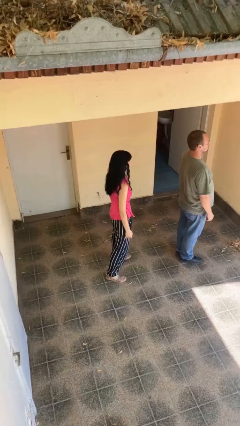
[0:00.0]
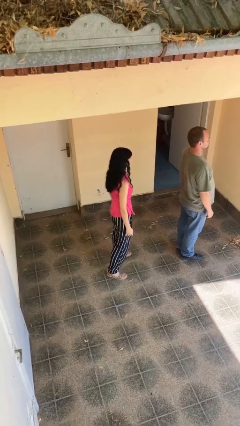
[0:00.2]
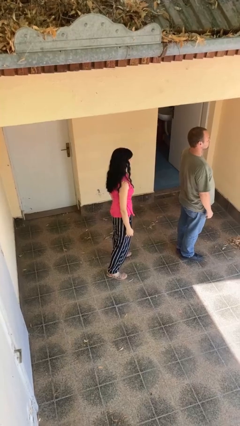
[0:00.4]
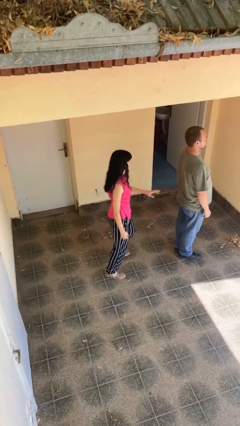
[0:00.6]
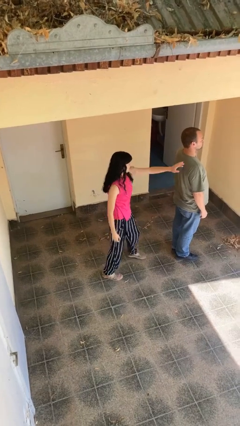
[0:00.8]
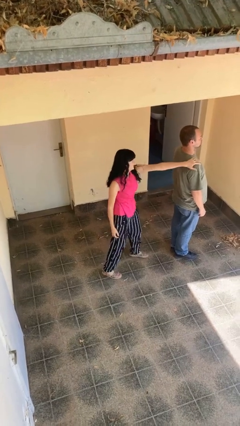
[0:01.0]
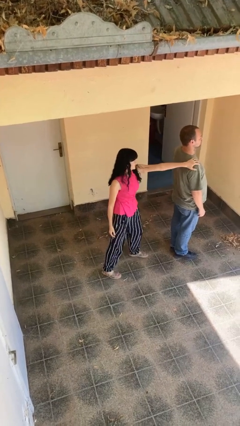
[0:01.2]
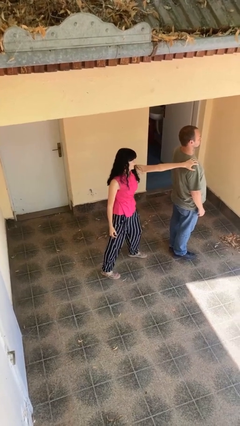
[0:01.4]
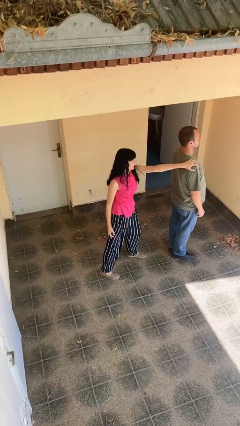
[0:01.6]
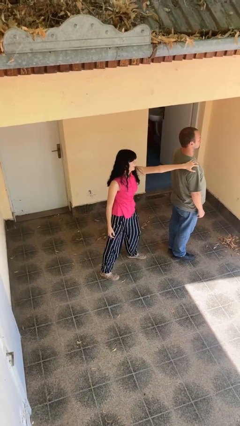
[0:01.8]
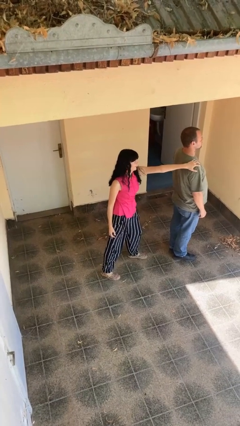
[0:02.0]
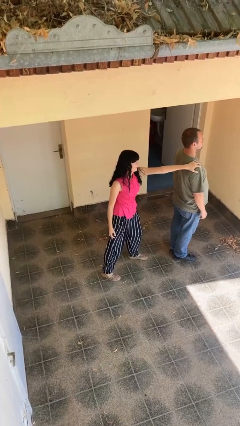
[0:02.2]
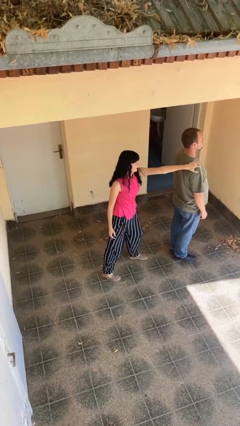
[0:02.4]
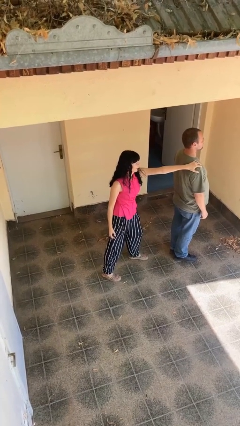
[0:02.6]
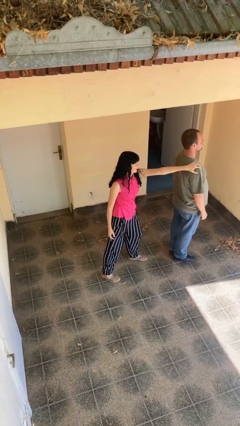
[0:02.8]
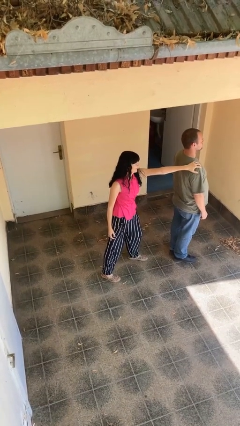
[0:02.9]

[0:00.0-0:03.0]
person grabs person by shoulder

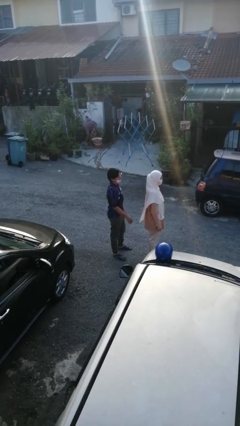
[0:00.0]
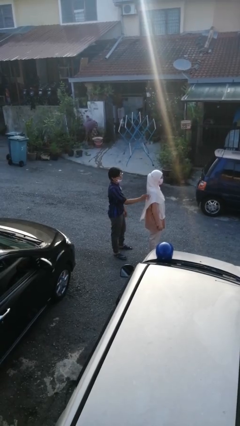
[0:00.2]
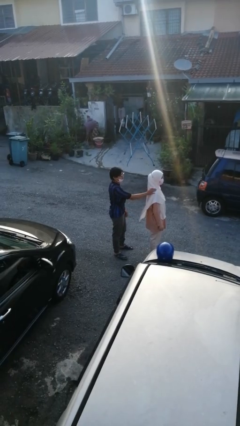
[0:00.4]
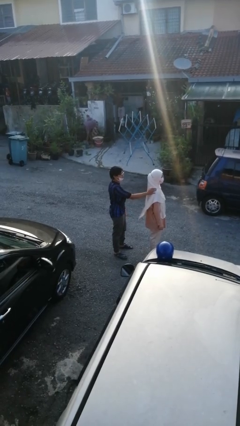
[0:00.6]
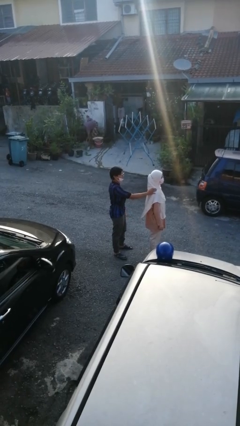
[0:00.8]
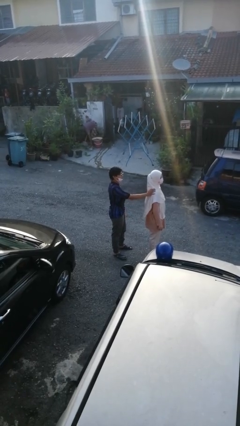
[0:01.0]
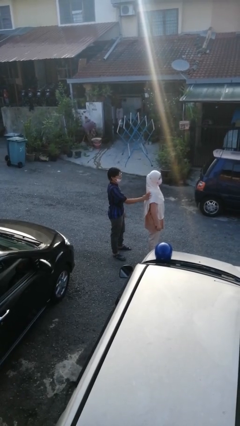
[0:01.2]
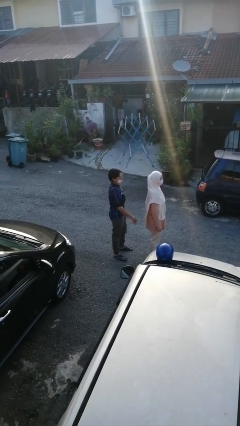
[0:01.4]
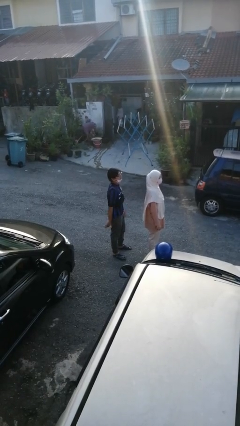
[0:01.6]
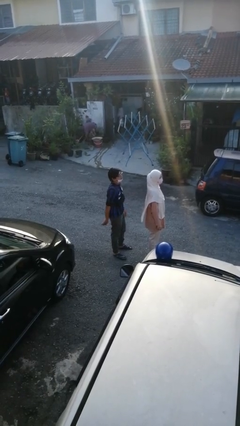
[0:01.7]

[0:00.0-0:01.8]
person touches back of person

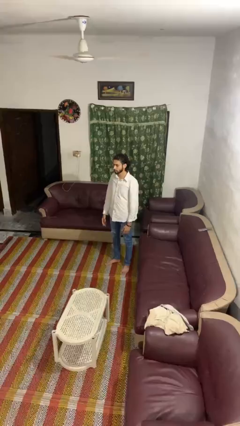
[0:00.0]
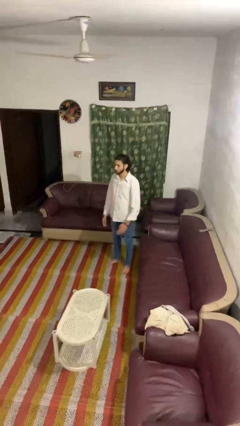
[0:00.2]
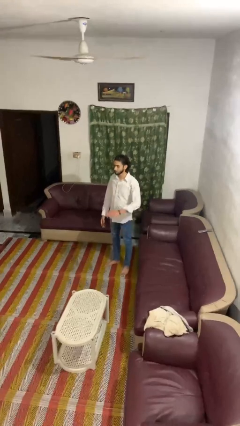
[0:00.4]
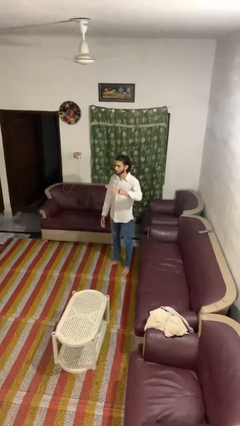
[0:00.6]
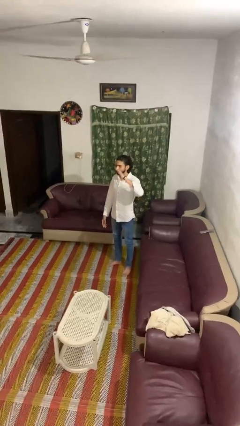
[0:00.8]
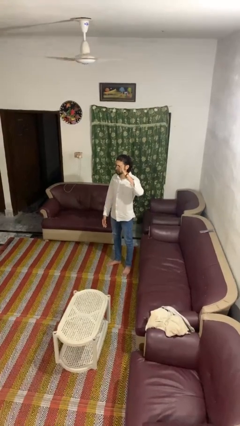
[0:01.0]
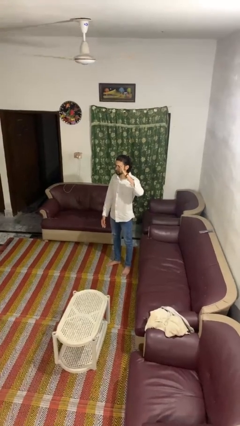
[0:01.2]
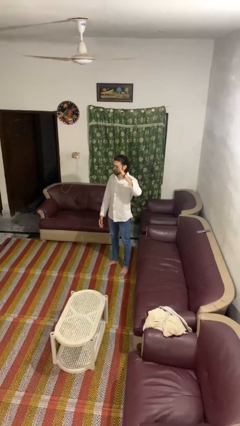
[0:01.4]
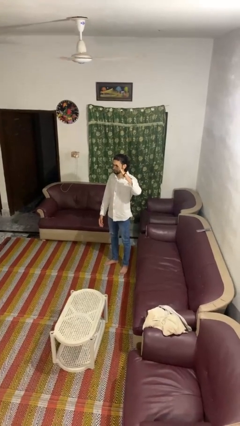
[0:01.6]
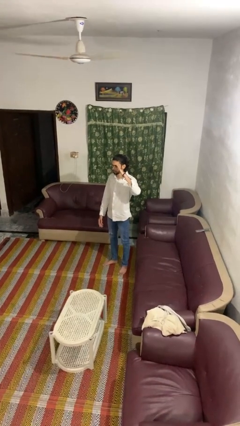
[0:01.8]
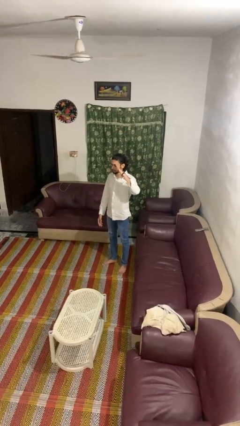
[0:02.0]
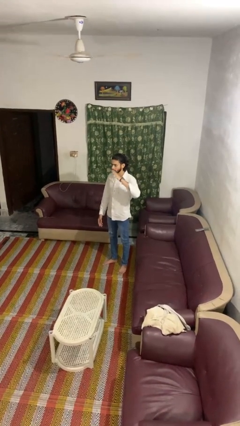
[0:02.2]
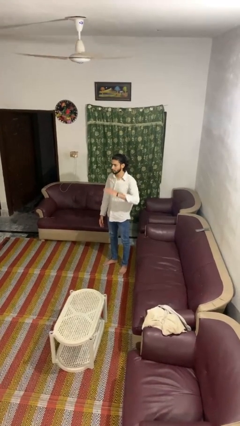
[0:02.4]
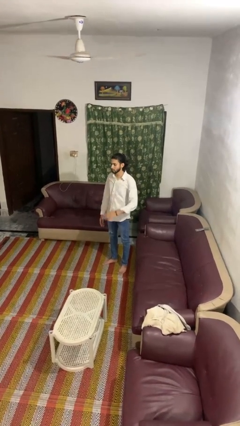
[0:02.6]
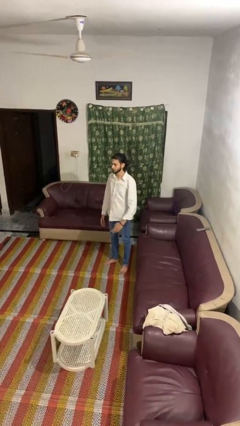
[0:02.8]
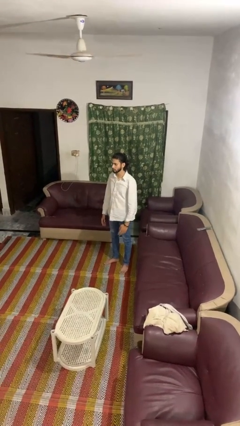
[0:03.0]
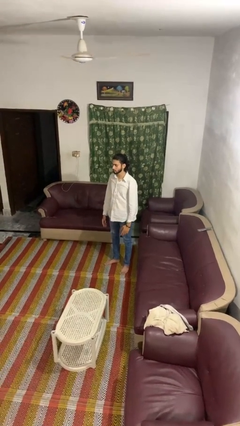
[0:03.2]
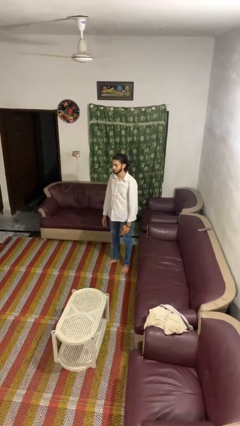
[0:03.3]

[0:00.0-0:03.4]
person salutes

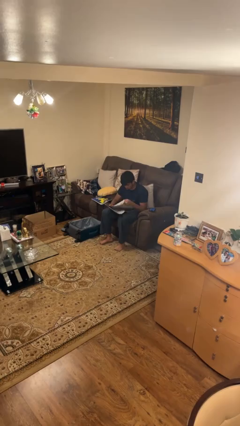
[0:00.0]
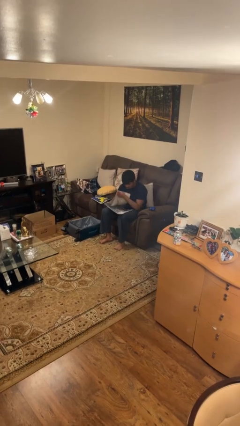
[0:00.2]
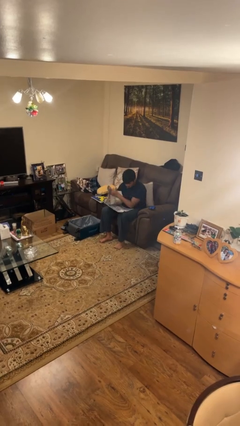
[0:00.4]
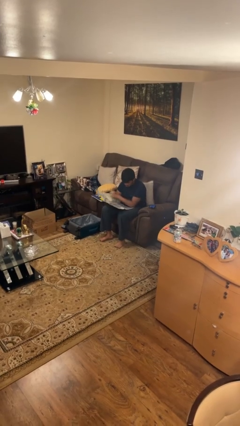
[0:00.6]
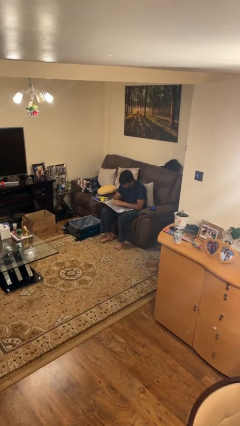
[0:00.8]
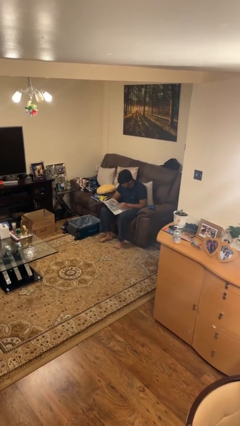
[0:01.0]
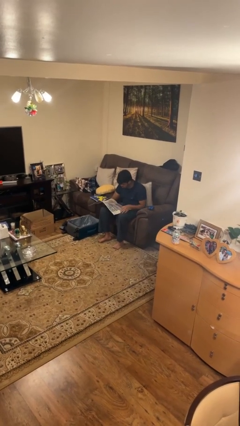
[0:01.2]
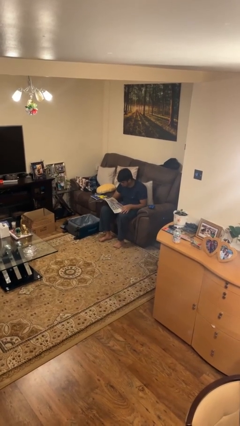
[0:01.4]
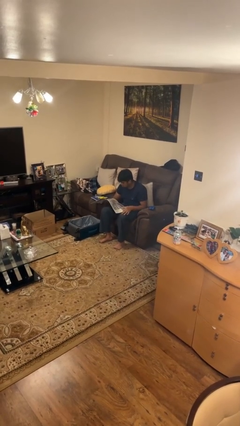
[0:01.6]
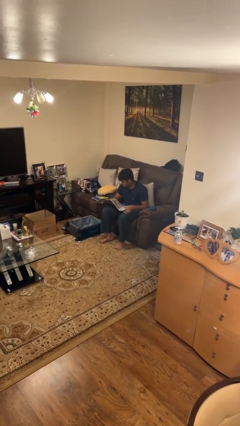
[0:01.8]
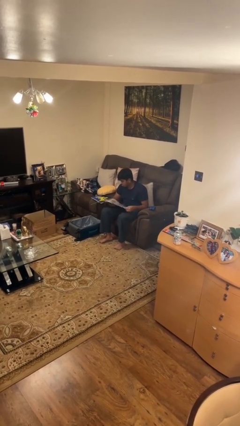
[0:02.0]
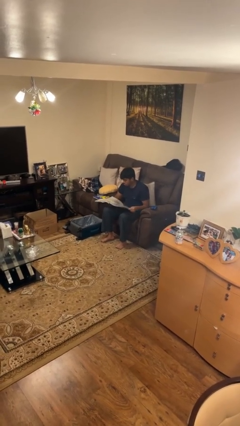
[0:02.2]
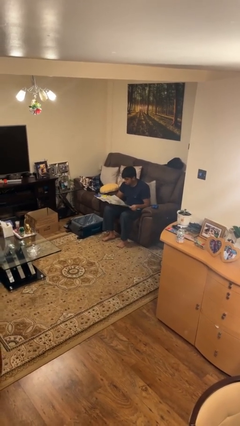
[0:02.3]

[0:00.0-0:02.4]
person reads newspaper

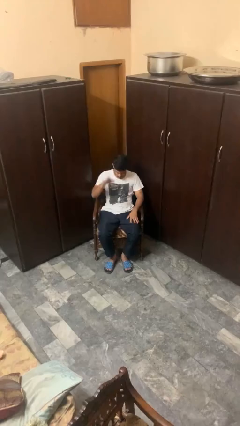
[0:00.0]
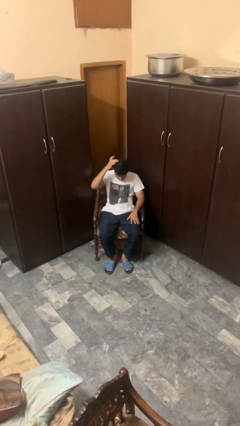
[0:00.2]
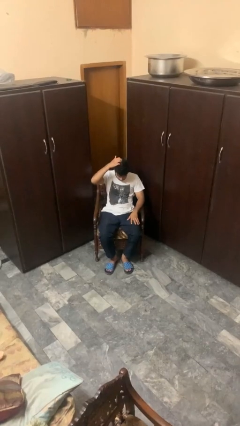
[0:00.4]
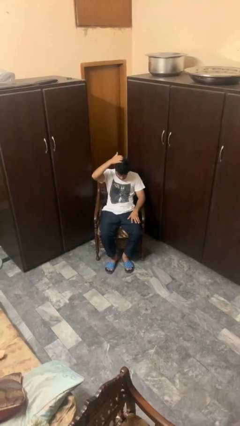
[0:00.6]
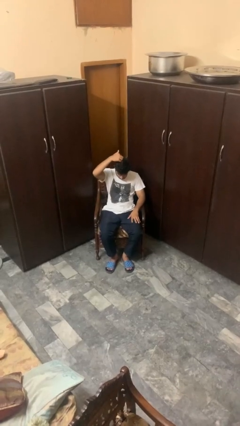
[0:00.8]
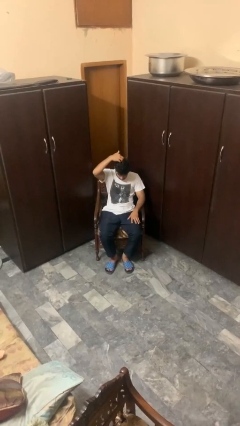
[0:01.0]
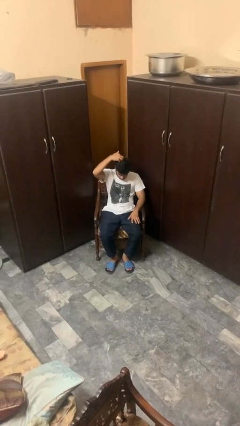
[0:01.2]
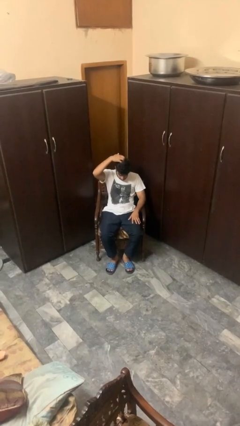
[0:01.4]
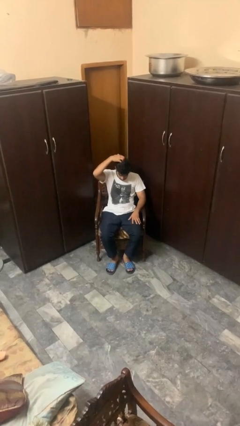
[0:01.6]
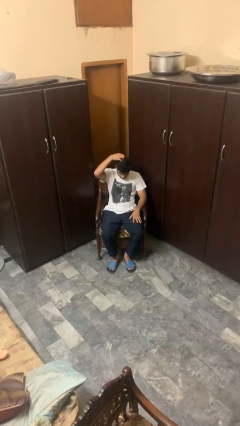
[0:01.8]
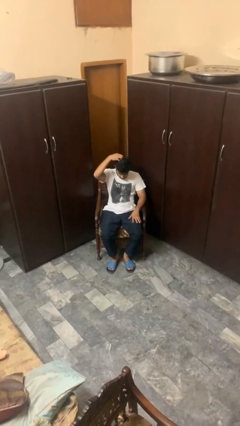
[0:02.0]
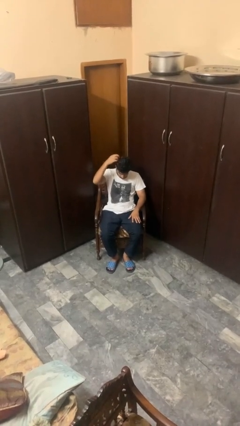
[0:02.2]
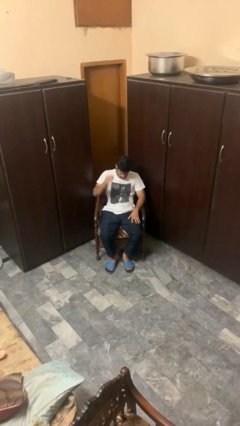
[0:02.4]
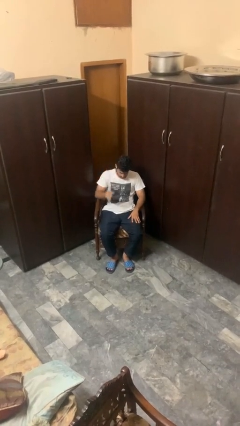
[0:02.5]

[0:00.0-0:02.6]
person scratches face

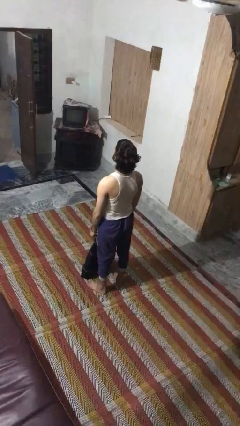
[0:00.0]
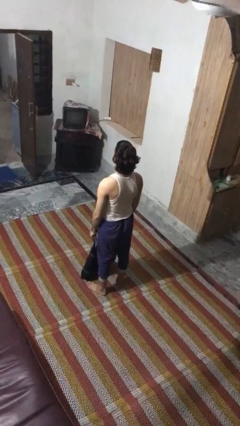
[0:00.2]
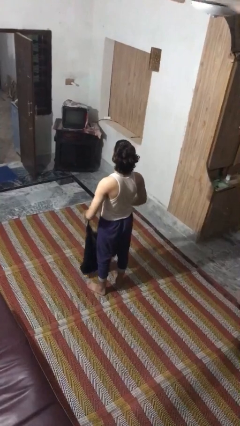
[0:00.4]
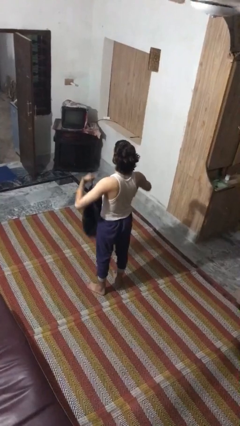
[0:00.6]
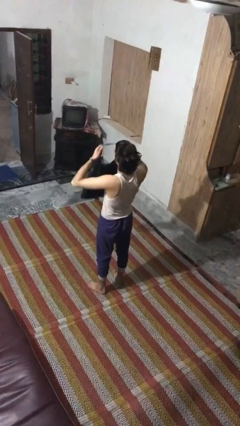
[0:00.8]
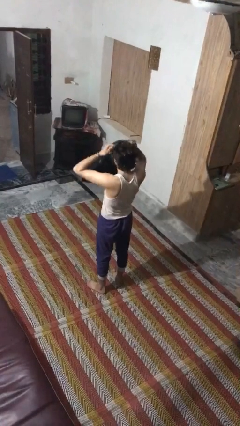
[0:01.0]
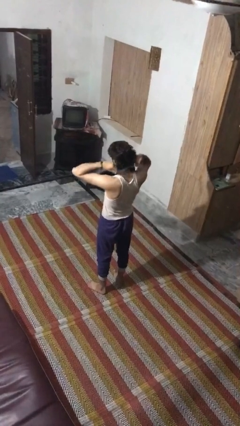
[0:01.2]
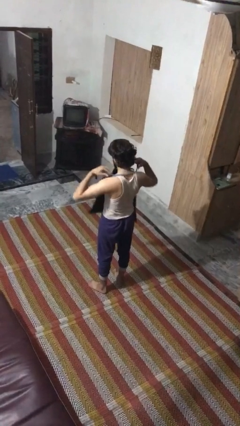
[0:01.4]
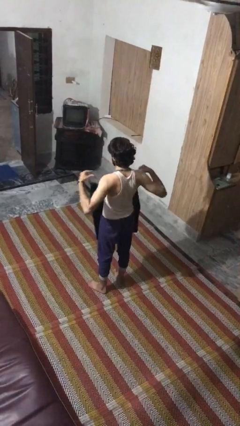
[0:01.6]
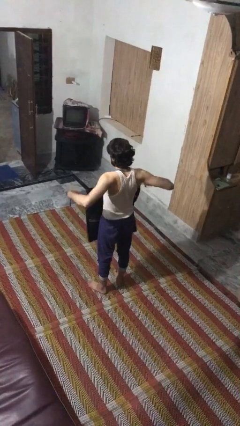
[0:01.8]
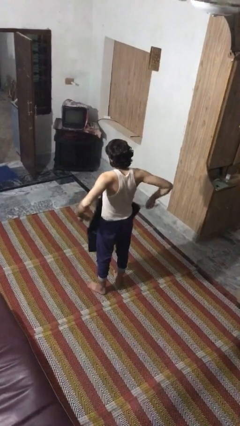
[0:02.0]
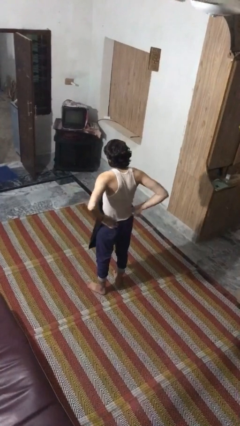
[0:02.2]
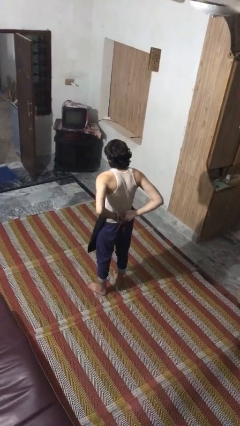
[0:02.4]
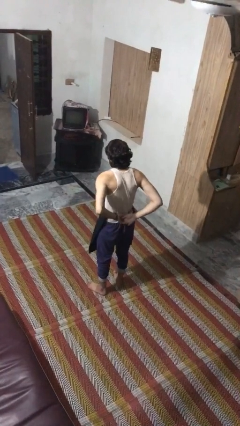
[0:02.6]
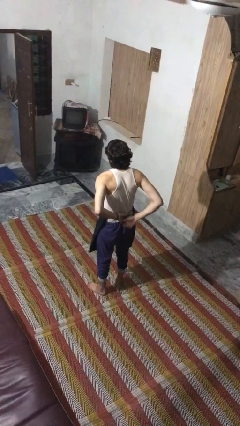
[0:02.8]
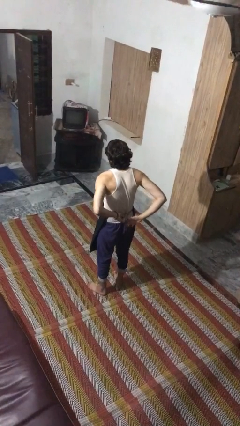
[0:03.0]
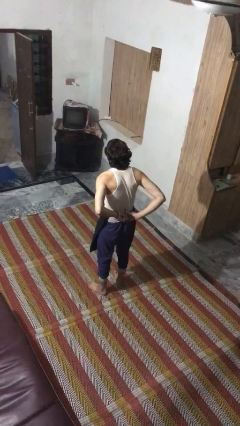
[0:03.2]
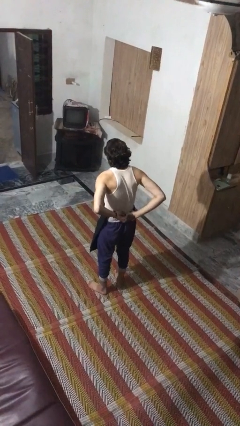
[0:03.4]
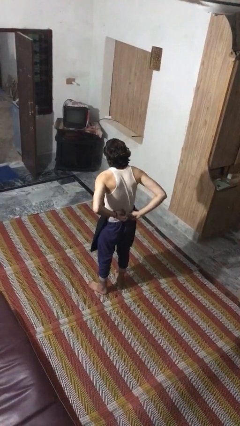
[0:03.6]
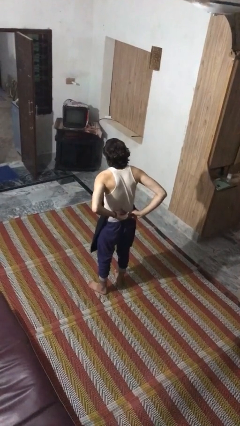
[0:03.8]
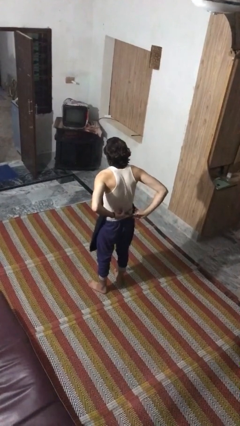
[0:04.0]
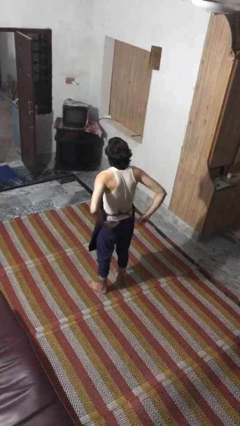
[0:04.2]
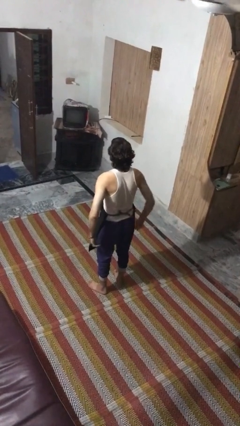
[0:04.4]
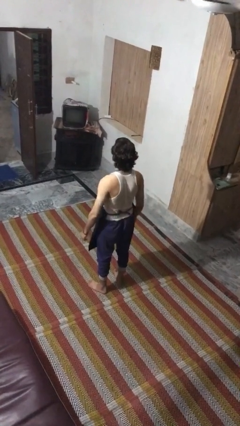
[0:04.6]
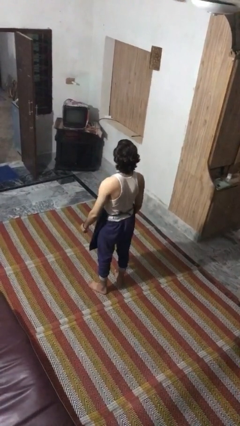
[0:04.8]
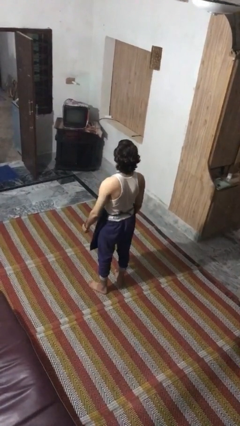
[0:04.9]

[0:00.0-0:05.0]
person puts on apron
